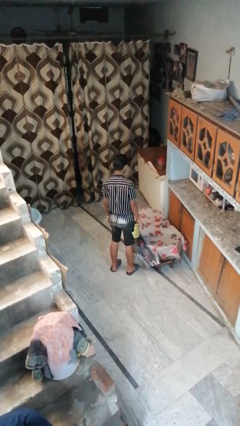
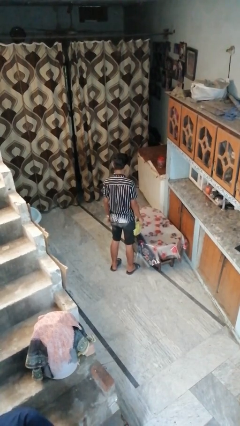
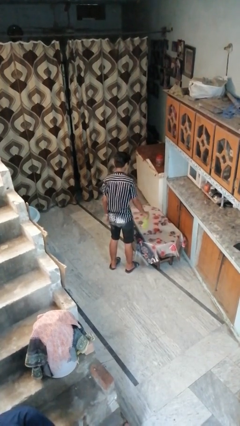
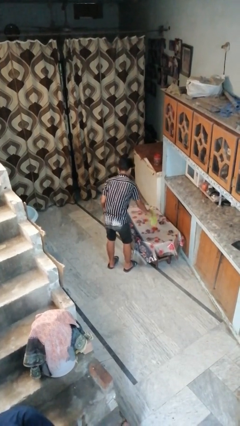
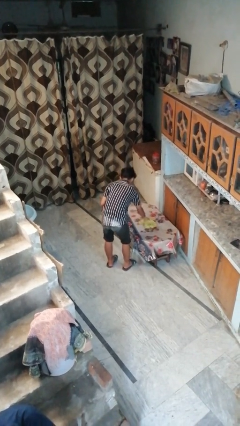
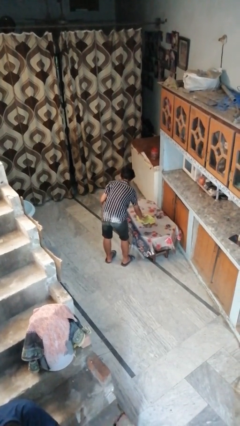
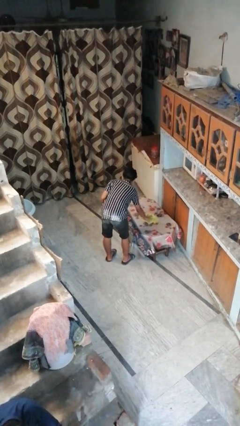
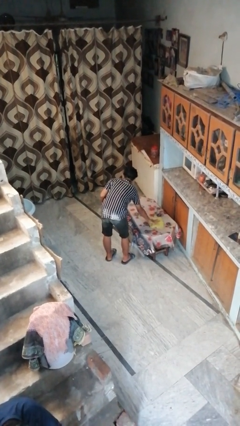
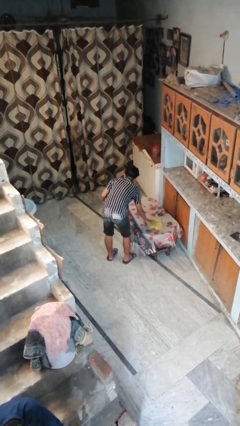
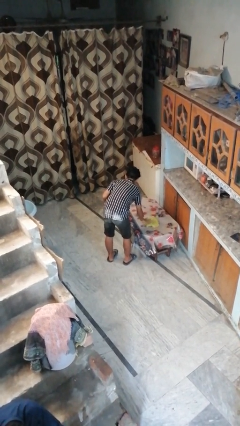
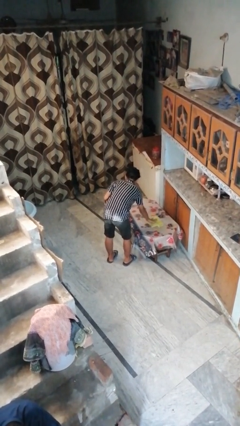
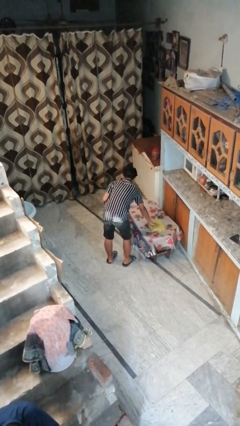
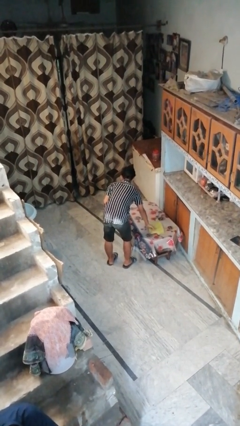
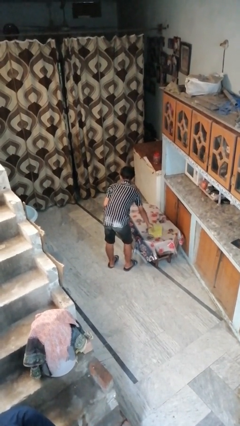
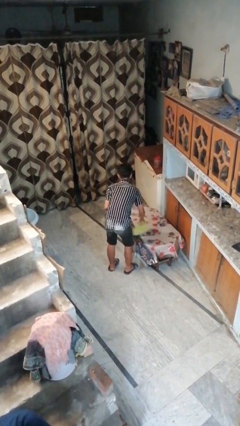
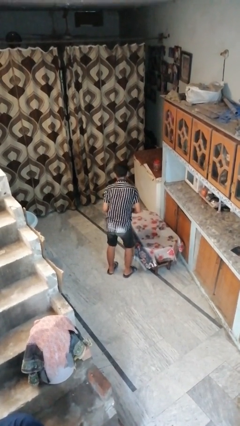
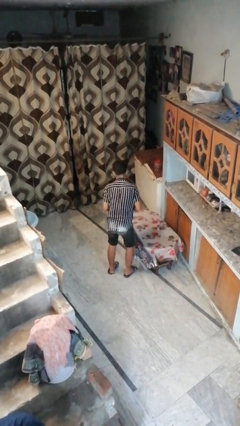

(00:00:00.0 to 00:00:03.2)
person cleans table with rag

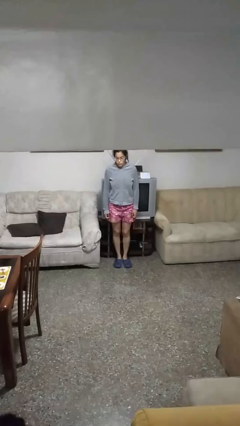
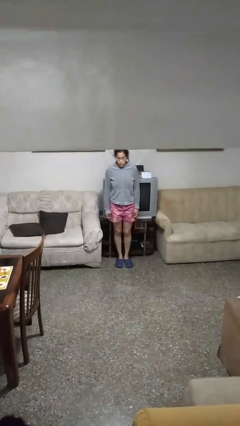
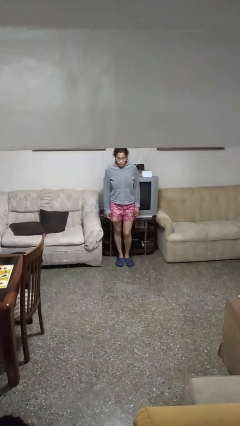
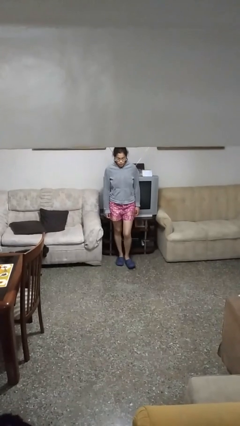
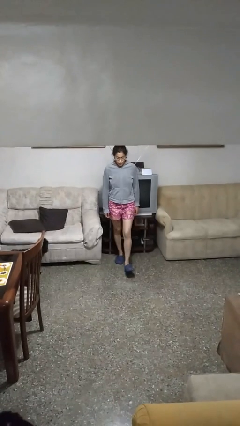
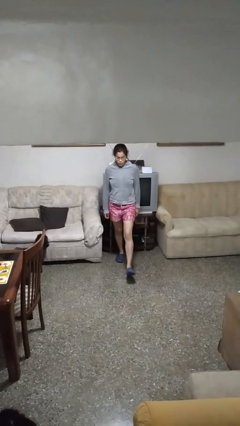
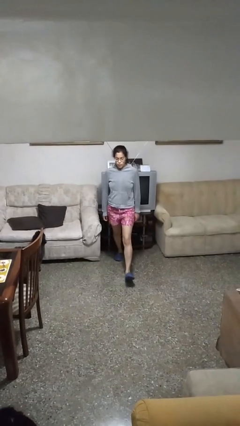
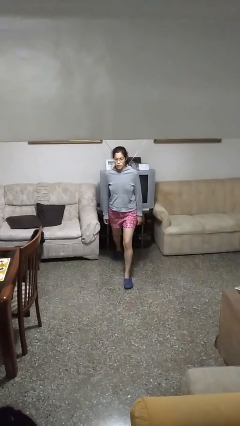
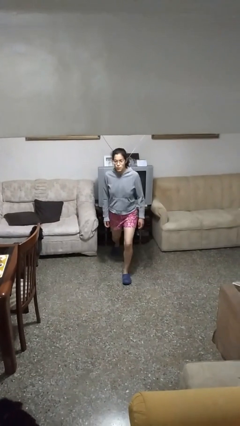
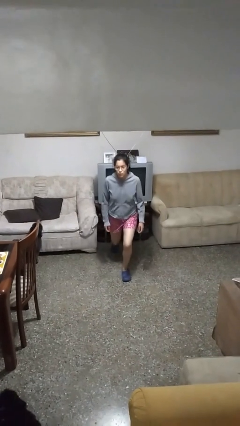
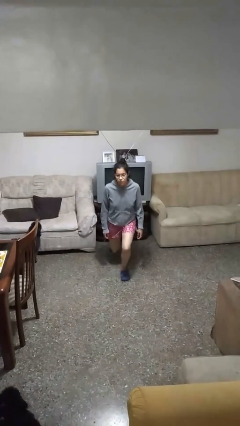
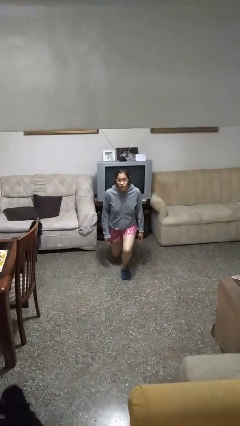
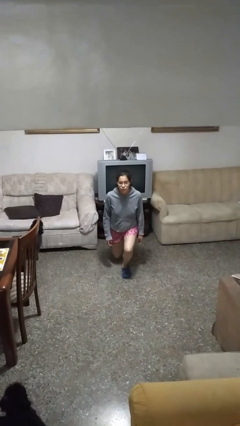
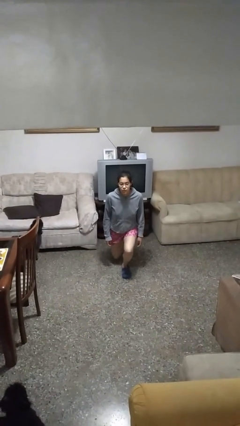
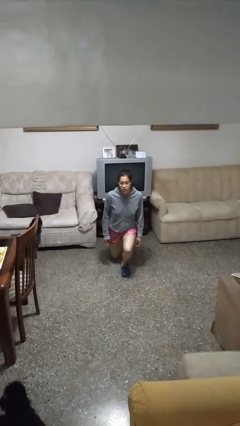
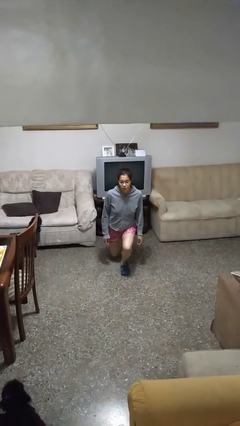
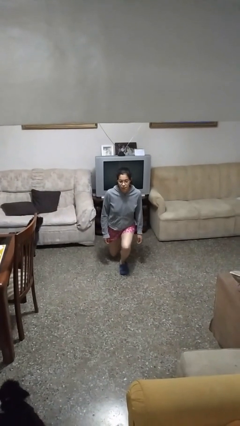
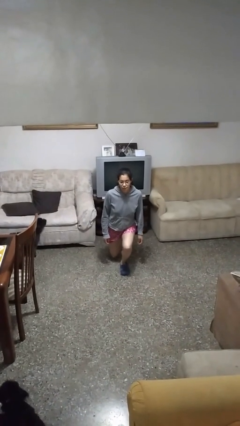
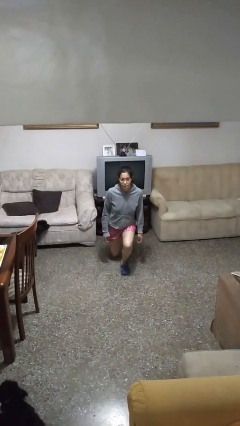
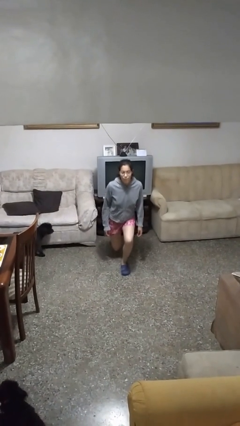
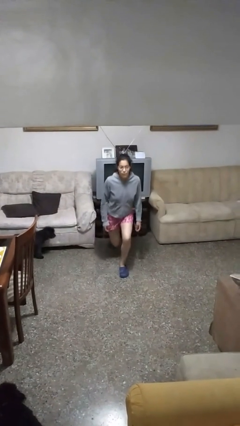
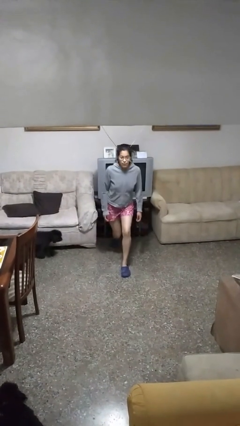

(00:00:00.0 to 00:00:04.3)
person exercises with lunges

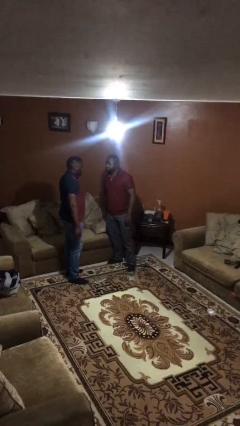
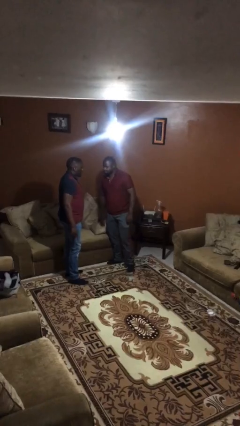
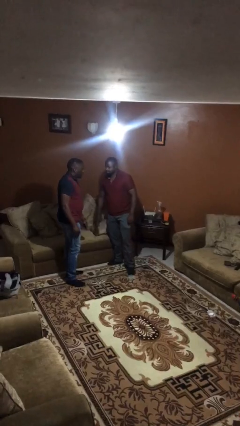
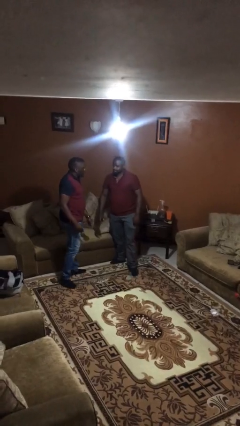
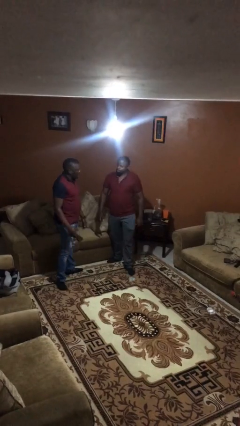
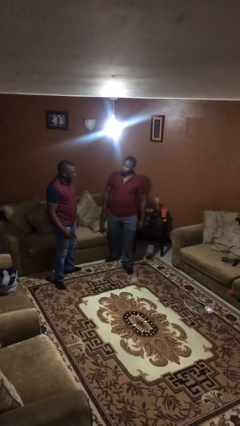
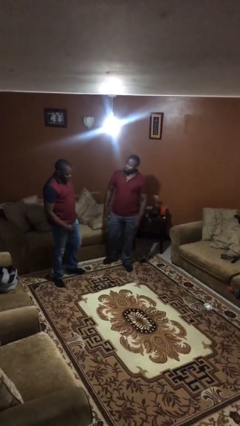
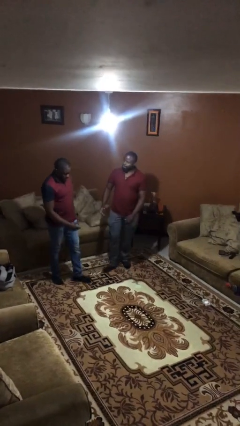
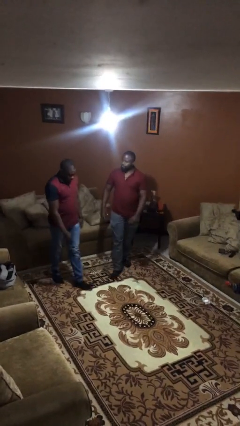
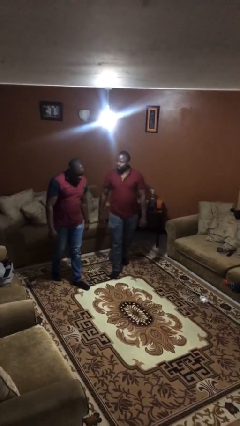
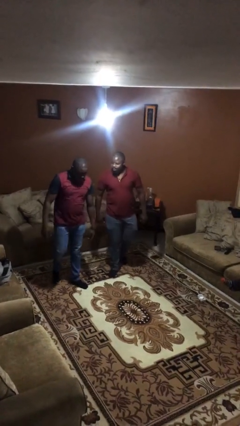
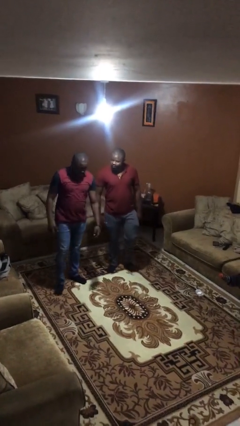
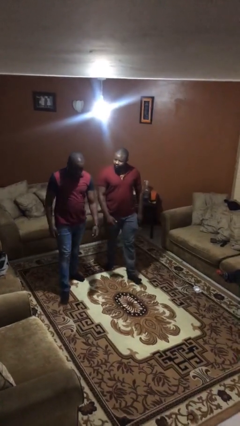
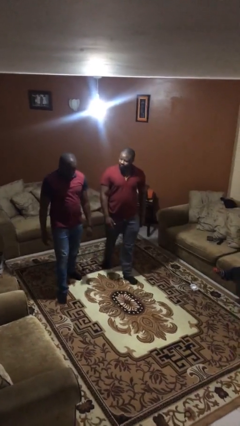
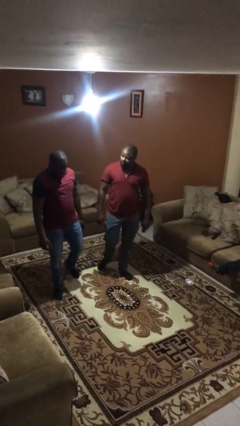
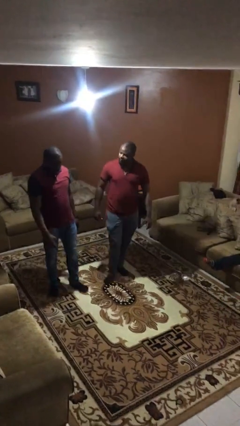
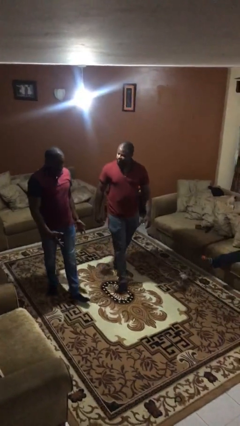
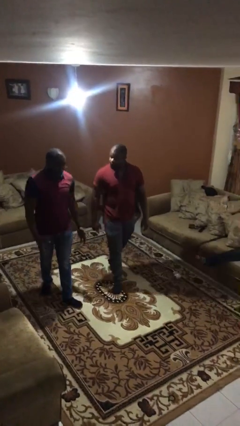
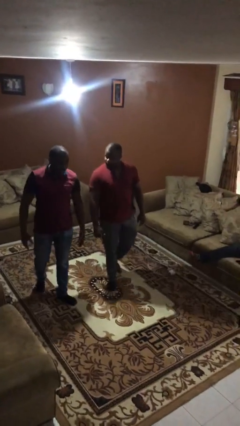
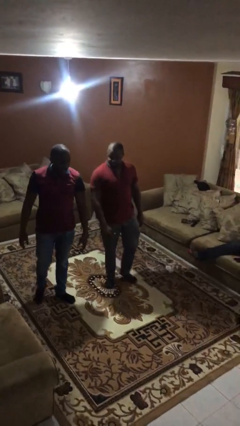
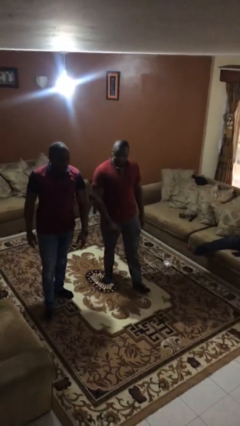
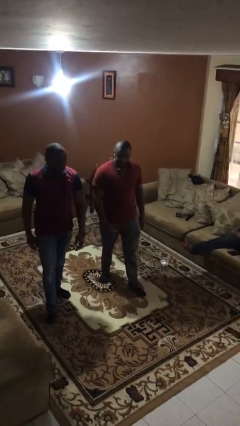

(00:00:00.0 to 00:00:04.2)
person talks to person

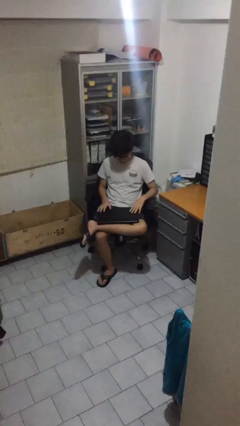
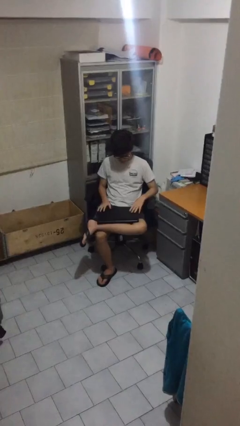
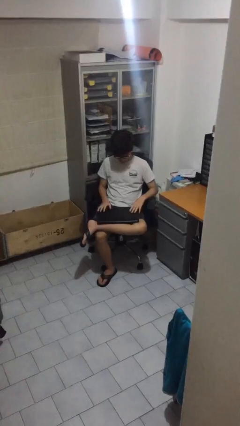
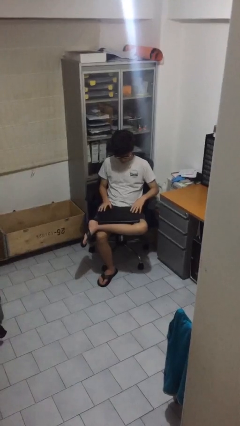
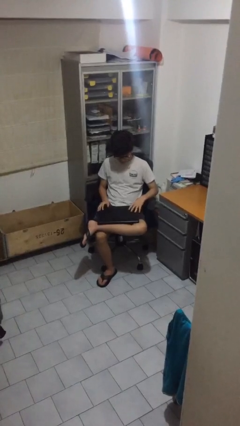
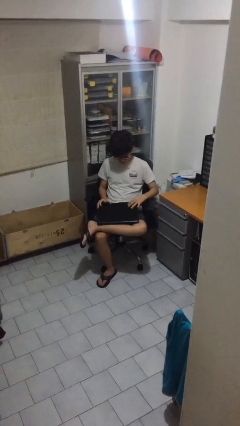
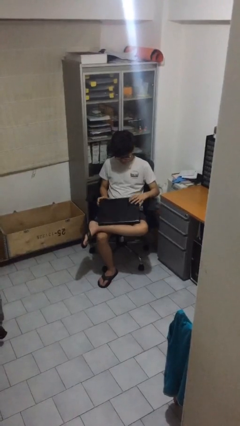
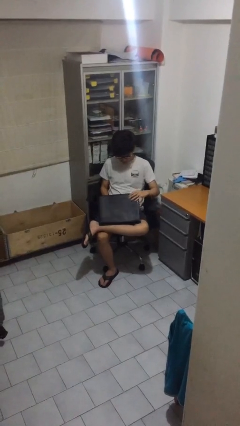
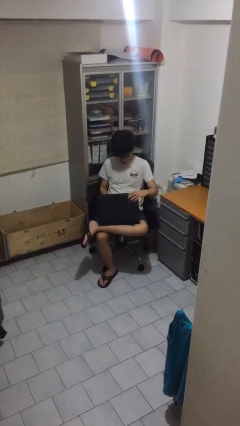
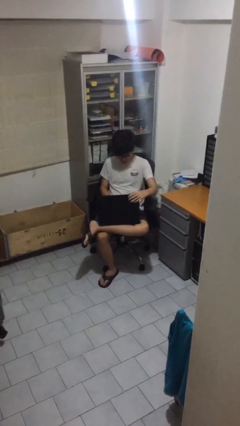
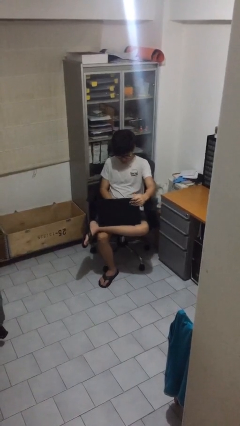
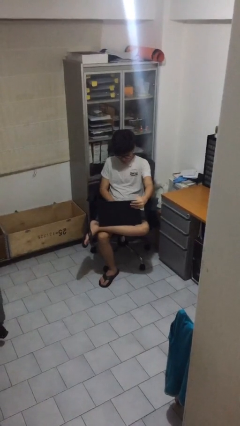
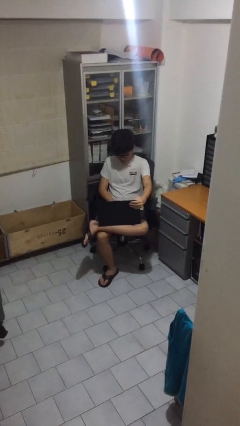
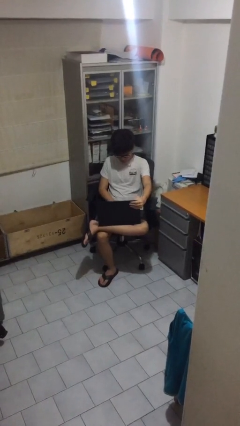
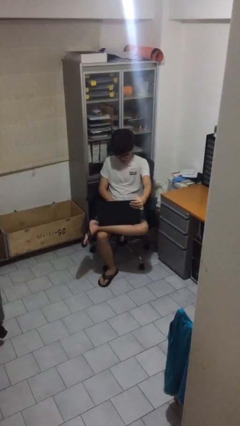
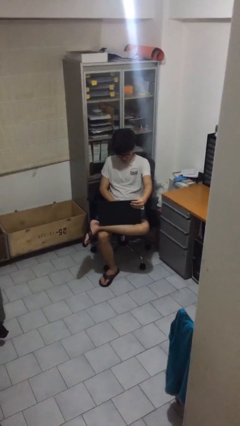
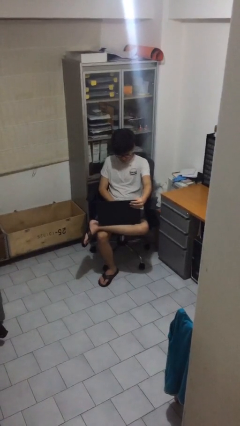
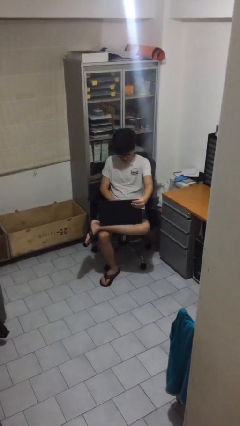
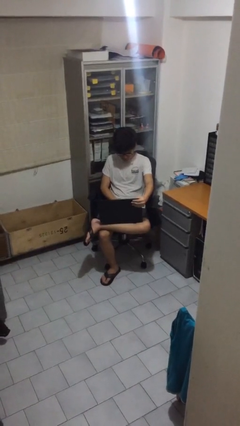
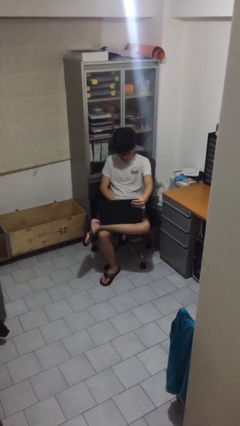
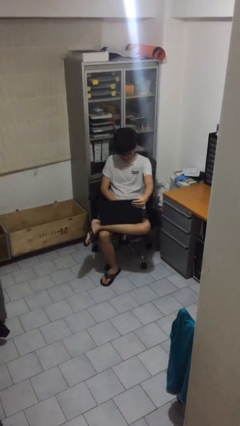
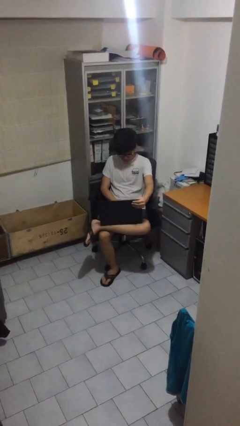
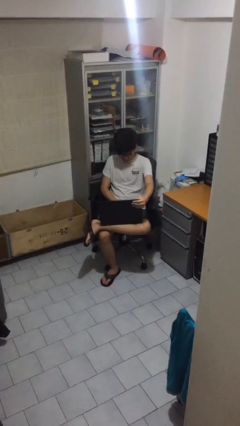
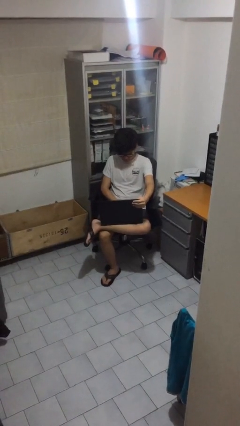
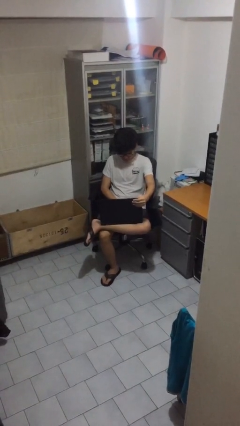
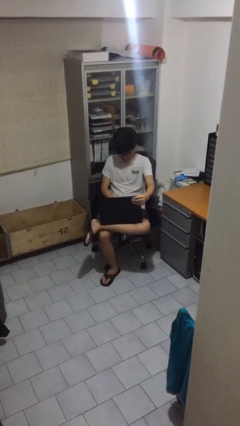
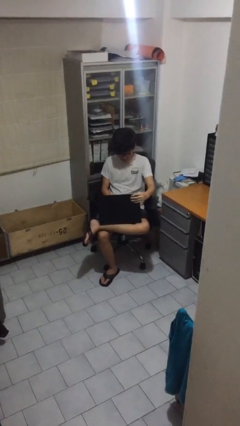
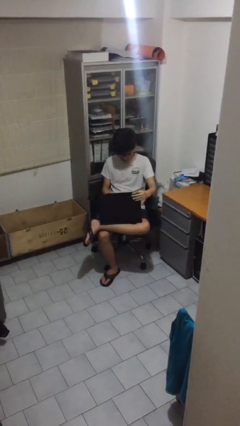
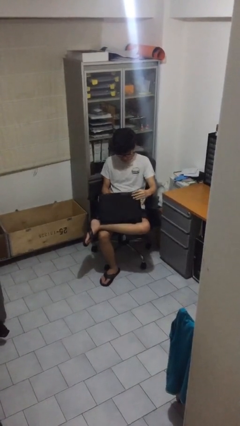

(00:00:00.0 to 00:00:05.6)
person interacts with laptop

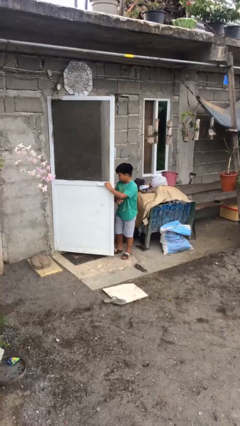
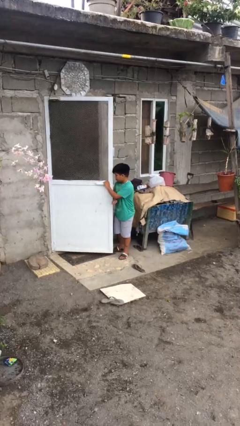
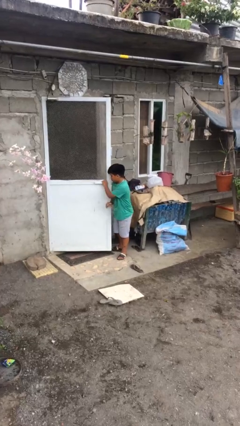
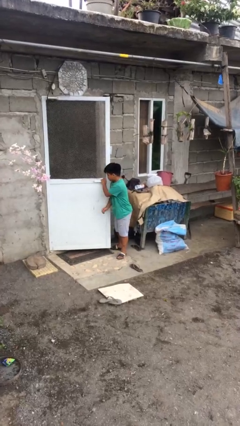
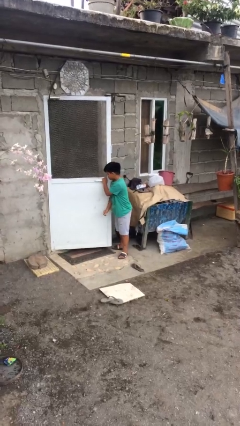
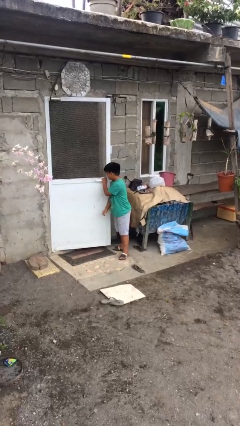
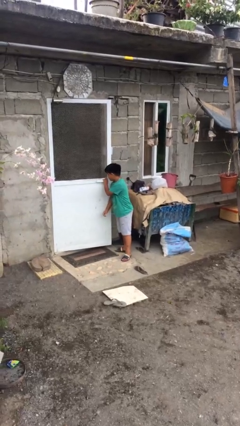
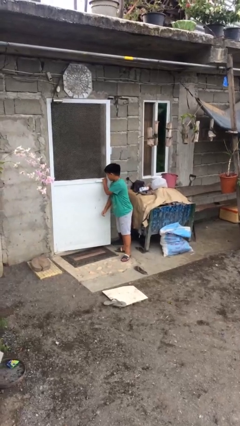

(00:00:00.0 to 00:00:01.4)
person closes facility door
